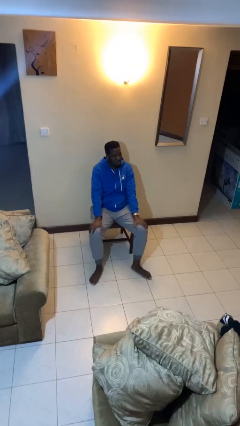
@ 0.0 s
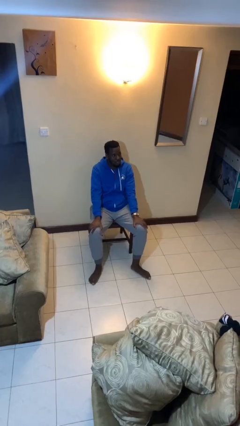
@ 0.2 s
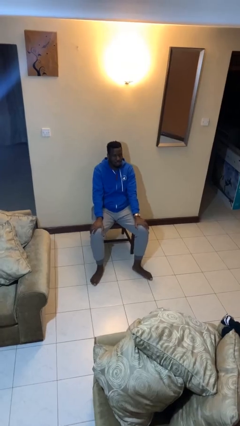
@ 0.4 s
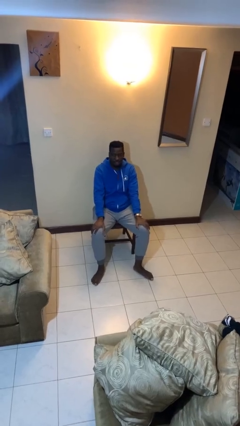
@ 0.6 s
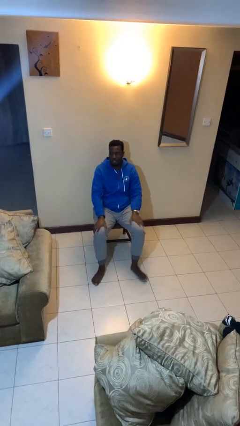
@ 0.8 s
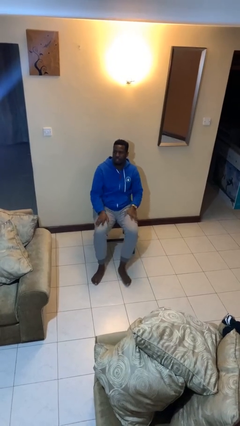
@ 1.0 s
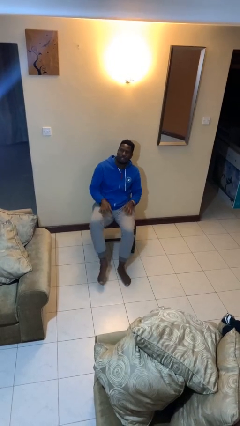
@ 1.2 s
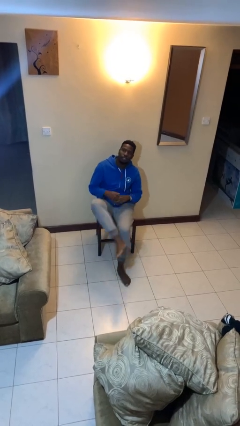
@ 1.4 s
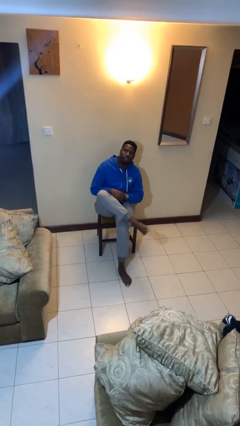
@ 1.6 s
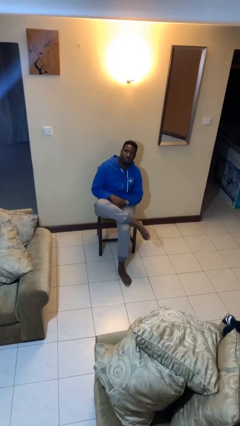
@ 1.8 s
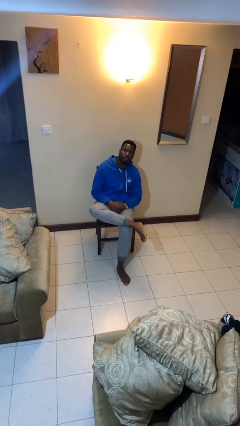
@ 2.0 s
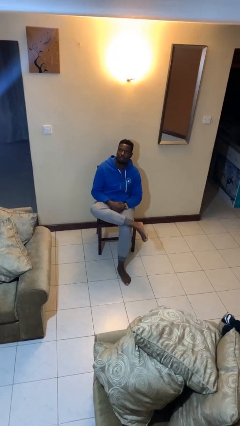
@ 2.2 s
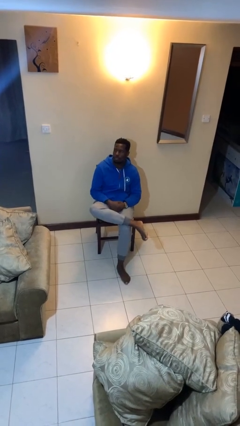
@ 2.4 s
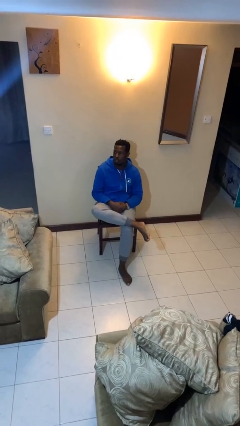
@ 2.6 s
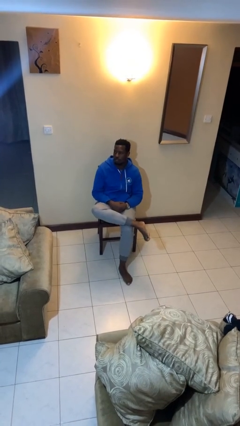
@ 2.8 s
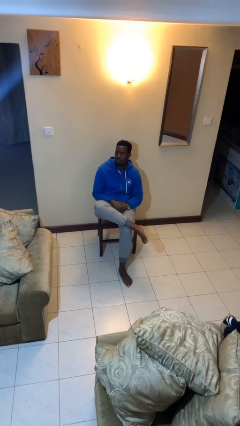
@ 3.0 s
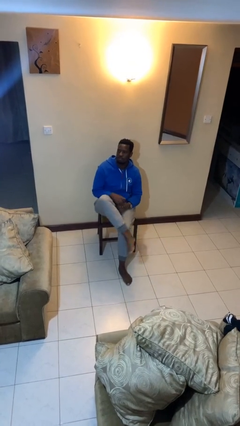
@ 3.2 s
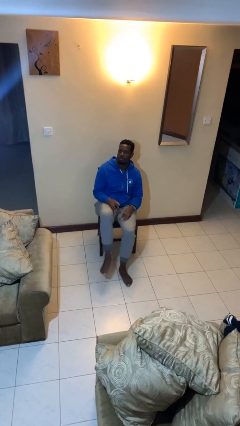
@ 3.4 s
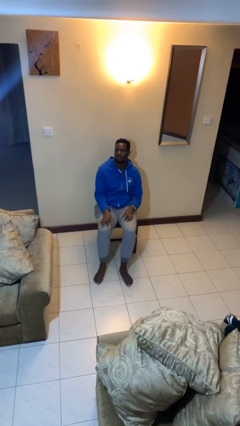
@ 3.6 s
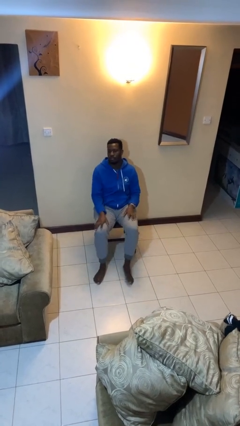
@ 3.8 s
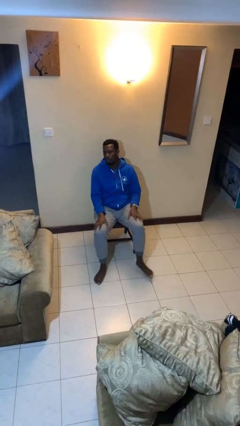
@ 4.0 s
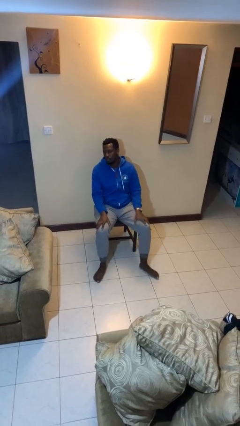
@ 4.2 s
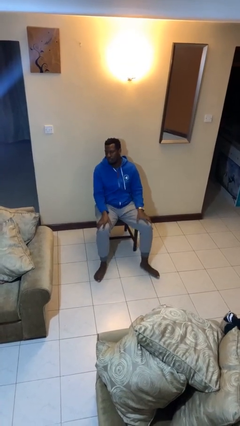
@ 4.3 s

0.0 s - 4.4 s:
person crosses legs

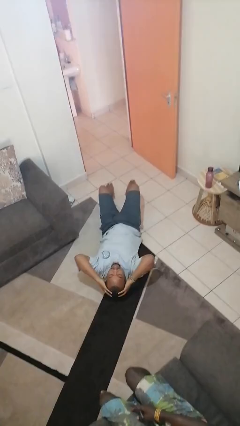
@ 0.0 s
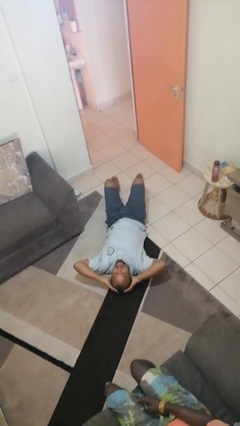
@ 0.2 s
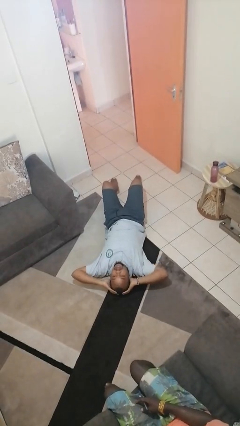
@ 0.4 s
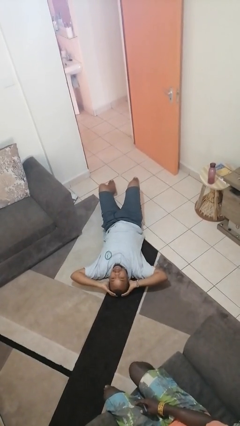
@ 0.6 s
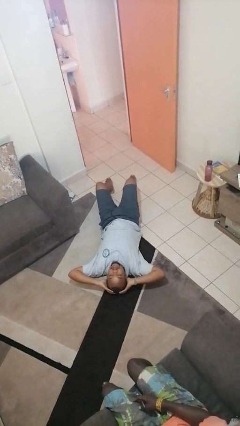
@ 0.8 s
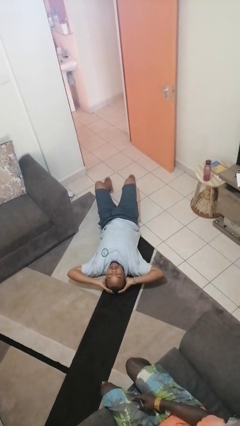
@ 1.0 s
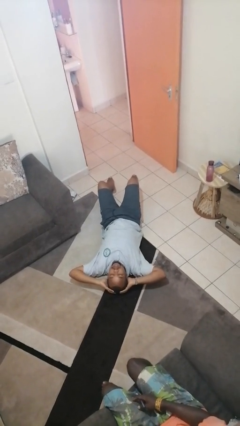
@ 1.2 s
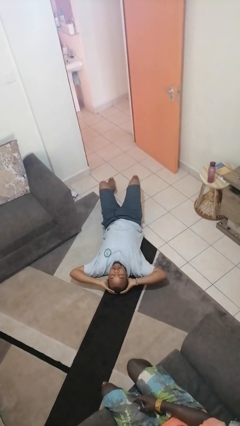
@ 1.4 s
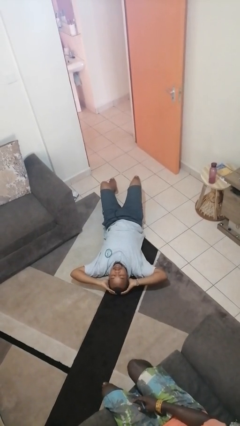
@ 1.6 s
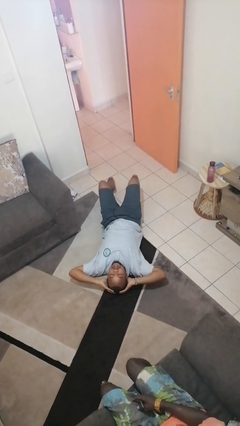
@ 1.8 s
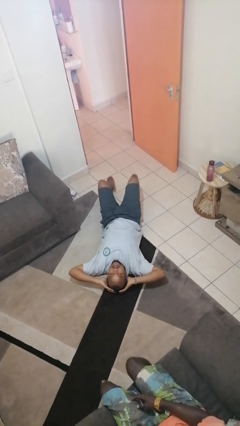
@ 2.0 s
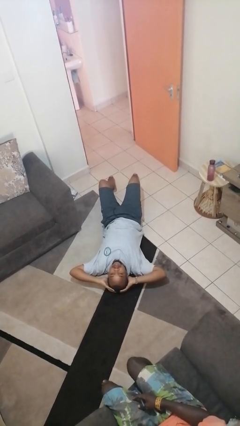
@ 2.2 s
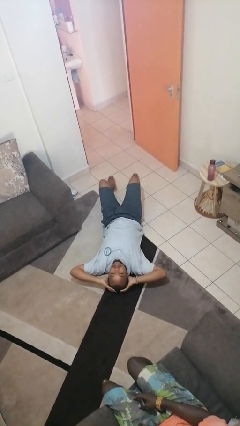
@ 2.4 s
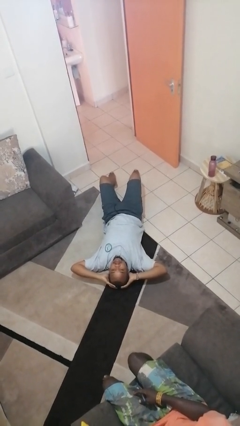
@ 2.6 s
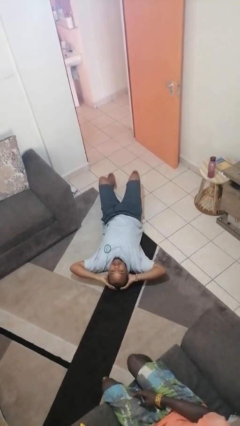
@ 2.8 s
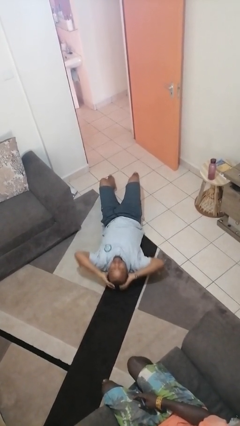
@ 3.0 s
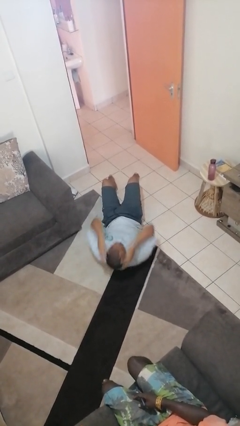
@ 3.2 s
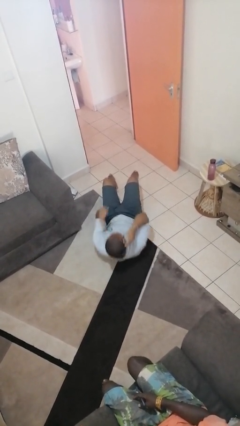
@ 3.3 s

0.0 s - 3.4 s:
person exercises with lunges

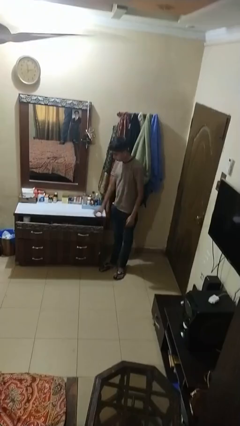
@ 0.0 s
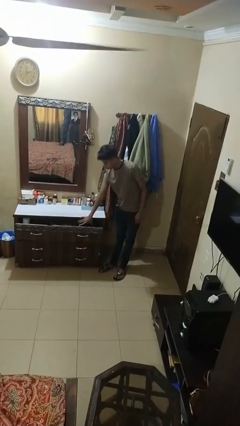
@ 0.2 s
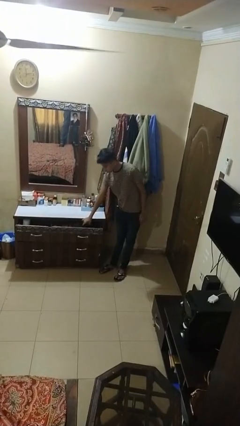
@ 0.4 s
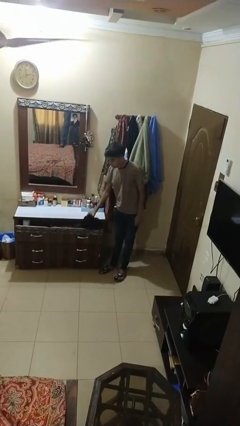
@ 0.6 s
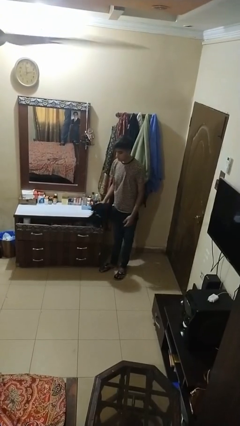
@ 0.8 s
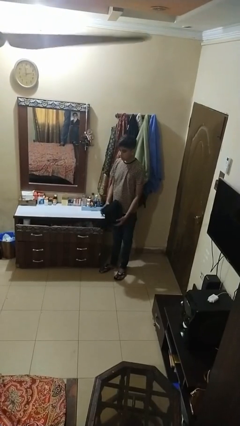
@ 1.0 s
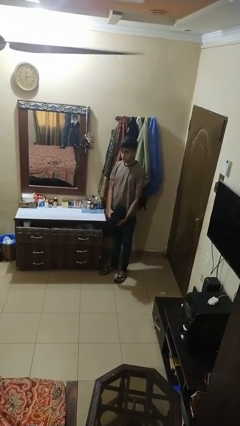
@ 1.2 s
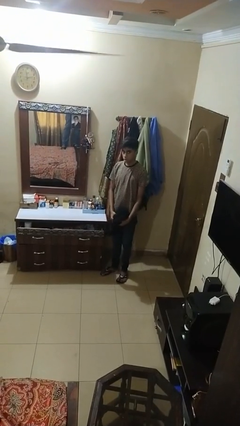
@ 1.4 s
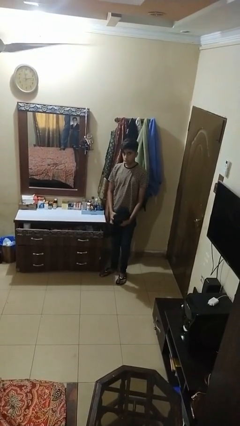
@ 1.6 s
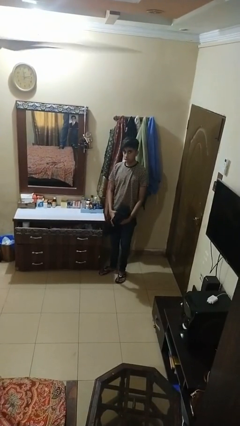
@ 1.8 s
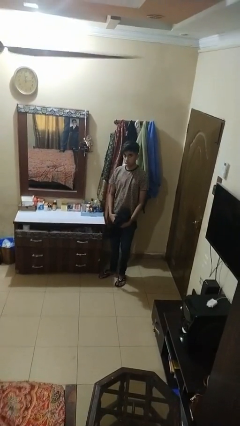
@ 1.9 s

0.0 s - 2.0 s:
person takes clothes from dresser

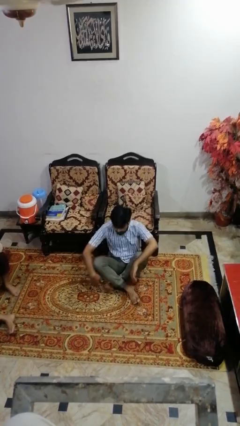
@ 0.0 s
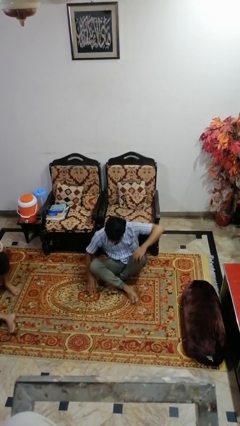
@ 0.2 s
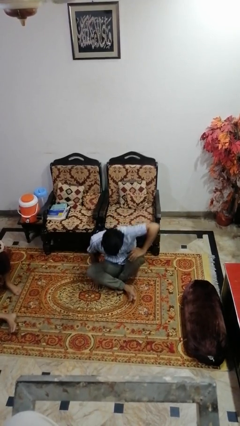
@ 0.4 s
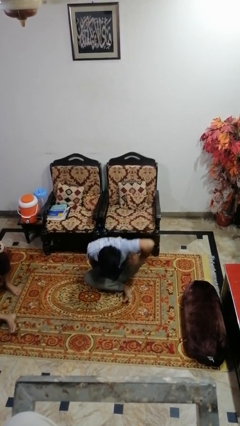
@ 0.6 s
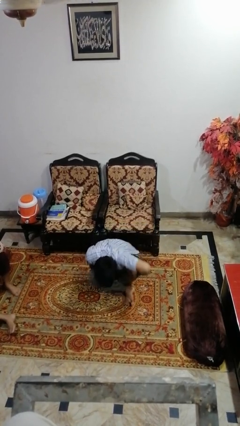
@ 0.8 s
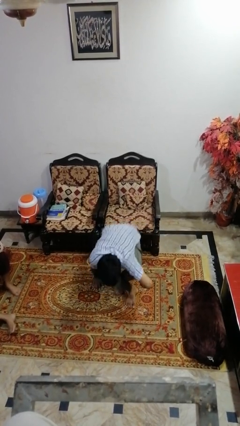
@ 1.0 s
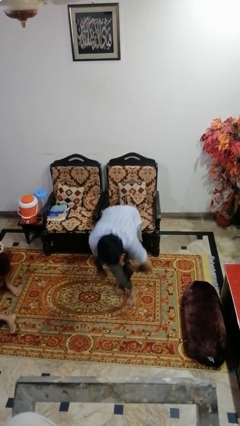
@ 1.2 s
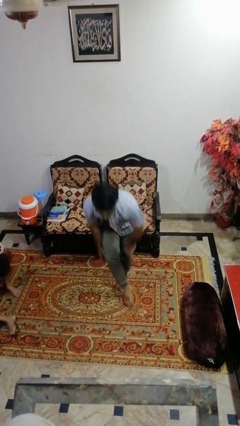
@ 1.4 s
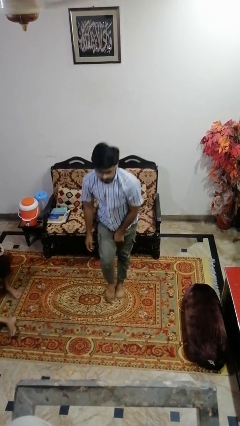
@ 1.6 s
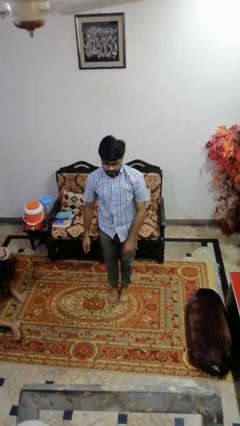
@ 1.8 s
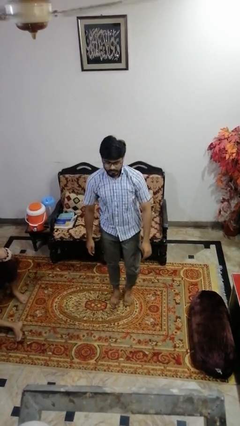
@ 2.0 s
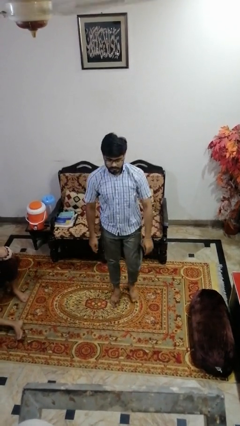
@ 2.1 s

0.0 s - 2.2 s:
person stands up from floor

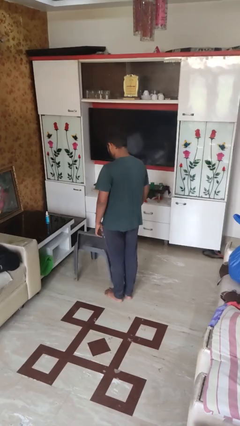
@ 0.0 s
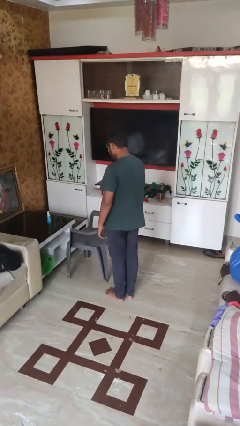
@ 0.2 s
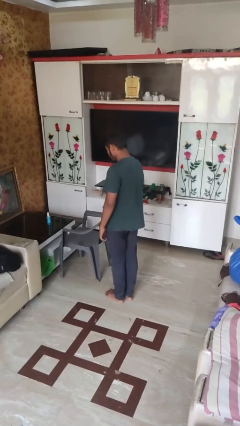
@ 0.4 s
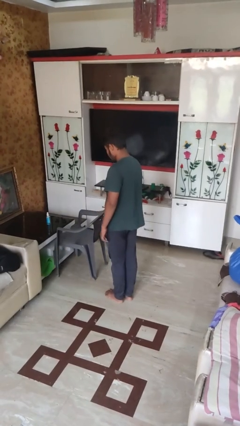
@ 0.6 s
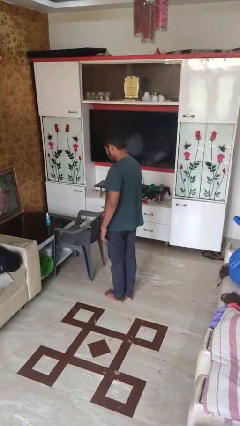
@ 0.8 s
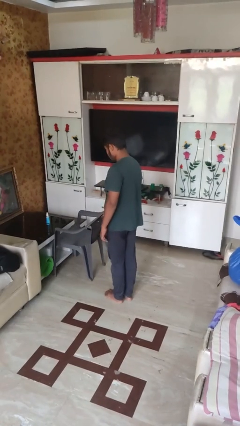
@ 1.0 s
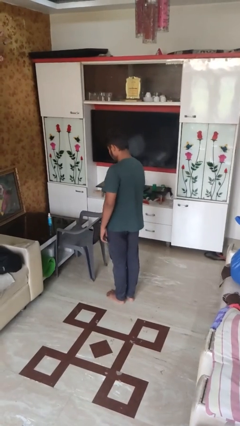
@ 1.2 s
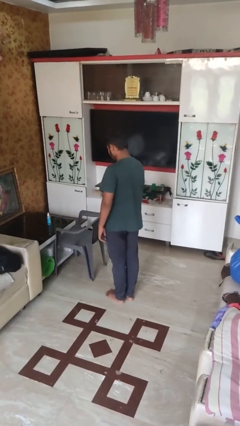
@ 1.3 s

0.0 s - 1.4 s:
person pushes in chair

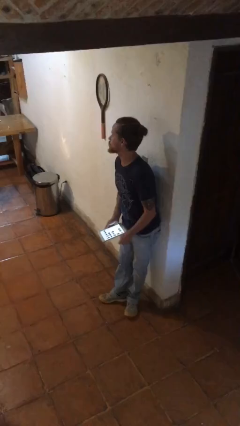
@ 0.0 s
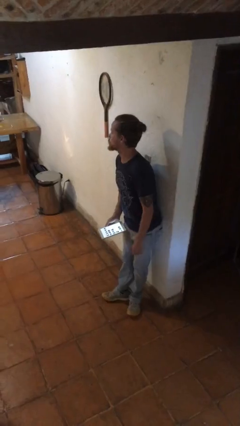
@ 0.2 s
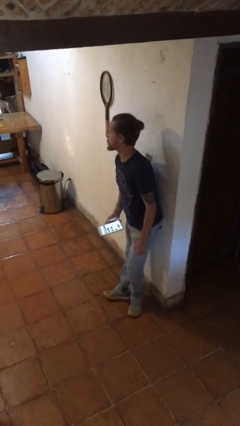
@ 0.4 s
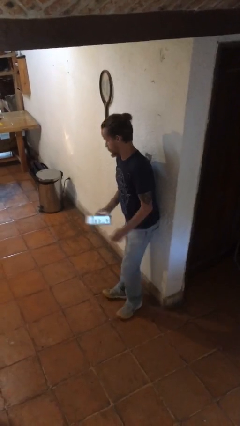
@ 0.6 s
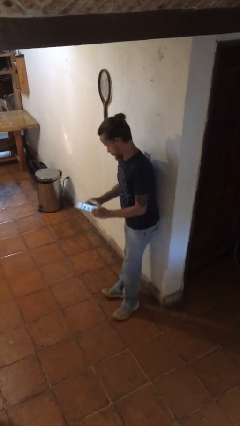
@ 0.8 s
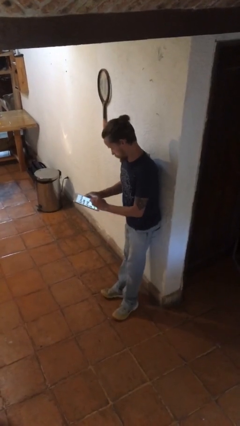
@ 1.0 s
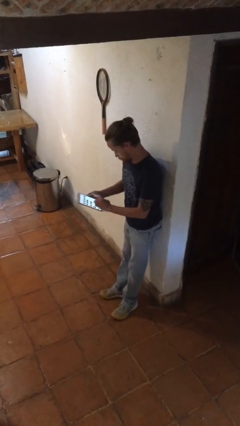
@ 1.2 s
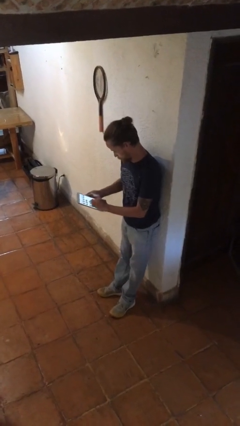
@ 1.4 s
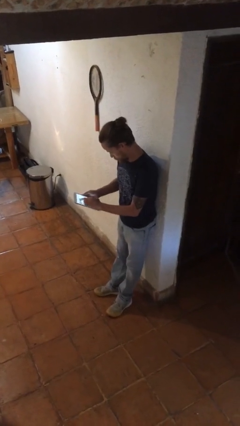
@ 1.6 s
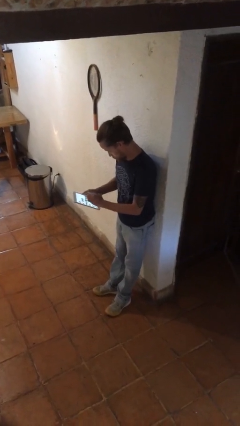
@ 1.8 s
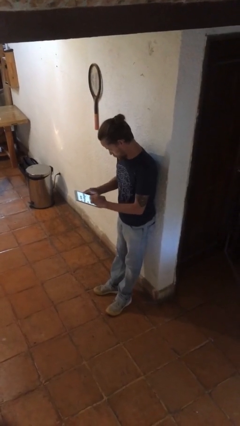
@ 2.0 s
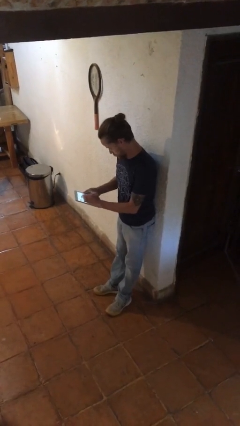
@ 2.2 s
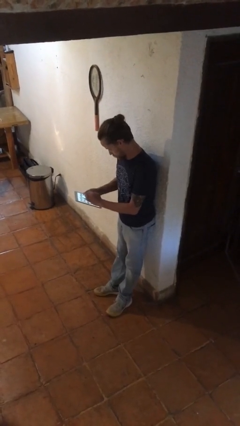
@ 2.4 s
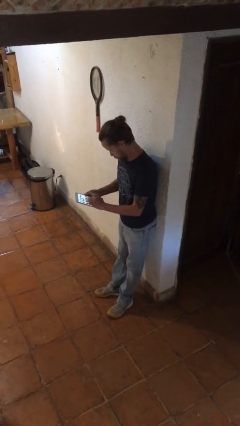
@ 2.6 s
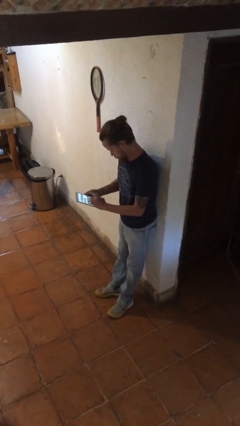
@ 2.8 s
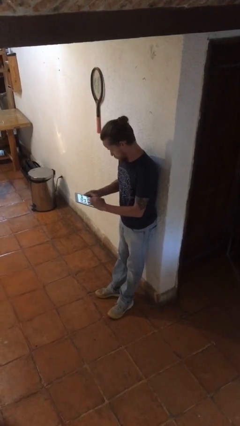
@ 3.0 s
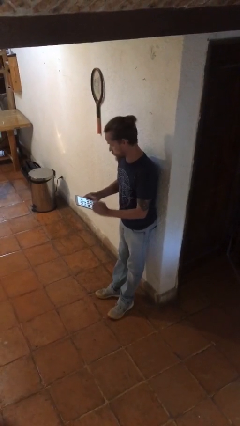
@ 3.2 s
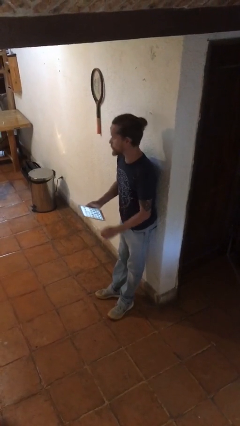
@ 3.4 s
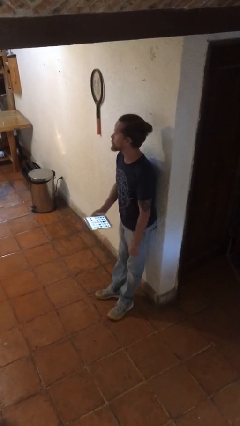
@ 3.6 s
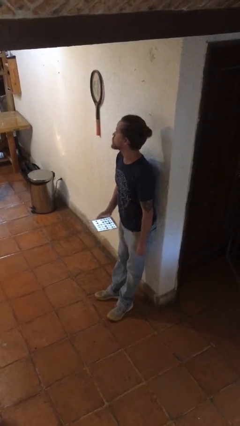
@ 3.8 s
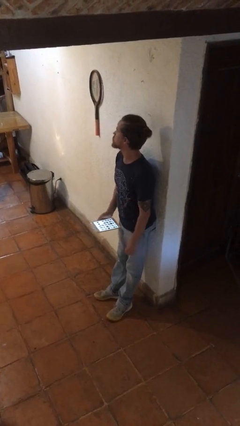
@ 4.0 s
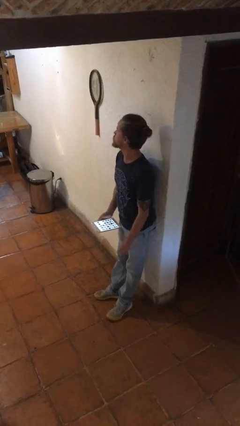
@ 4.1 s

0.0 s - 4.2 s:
person interacts with tablet
